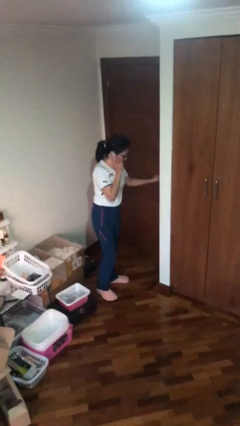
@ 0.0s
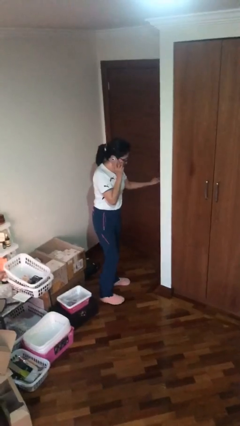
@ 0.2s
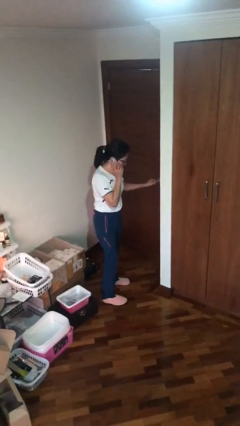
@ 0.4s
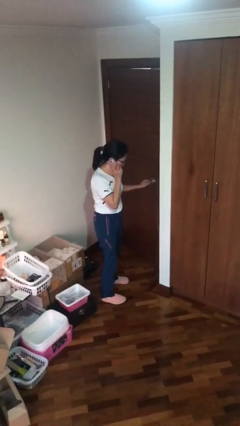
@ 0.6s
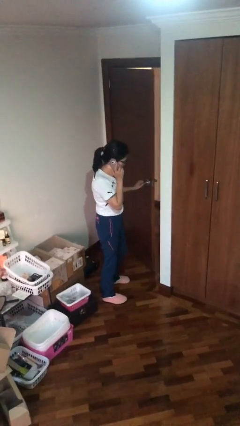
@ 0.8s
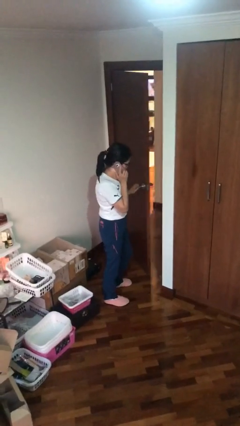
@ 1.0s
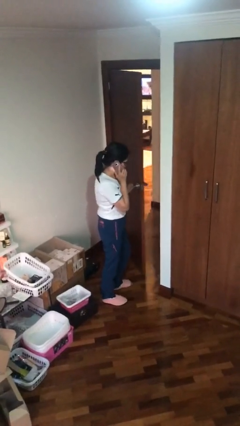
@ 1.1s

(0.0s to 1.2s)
person opens facility door

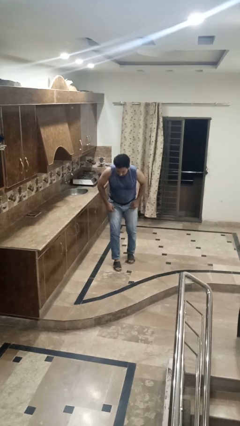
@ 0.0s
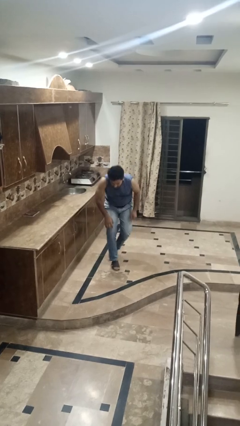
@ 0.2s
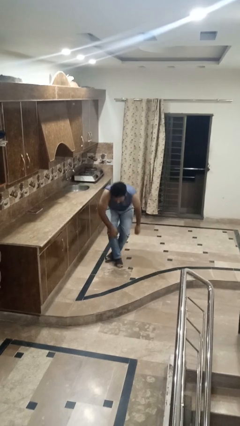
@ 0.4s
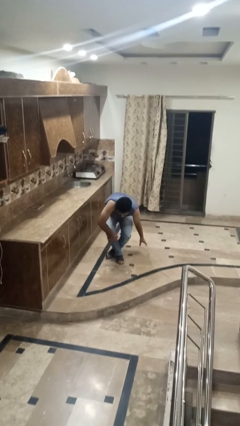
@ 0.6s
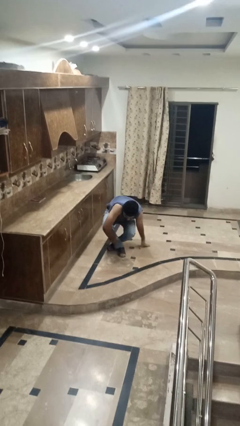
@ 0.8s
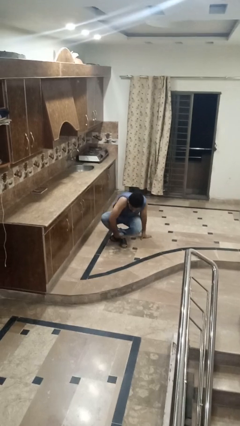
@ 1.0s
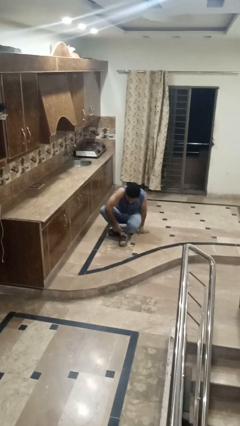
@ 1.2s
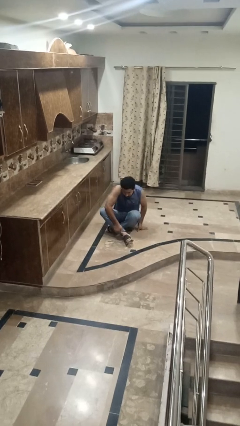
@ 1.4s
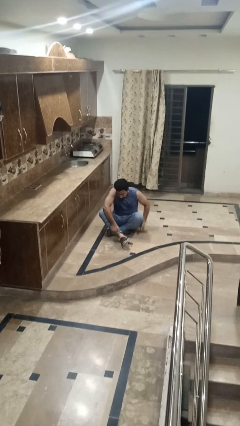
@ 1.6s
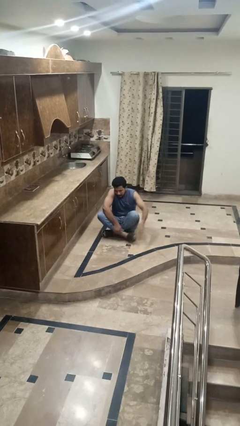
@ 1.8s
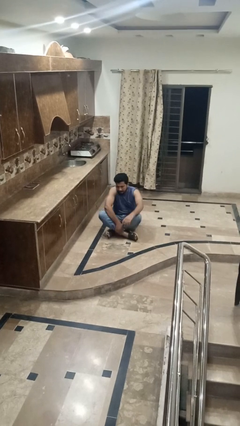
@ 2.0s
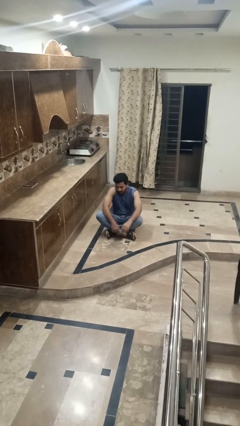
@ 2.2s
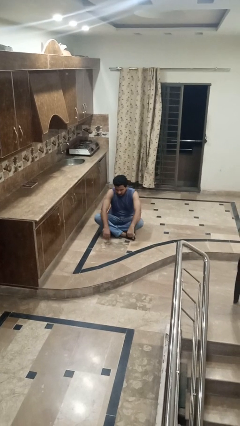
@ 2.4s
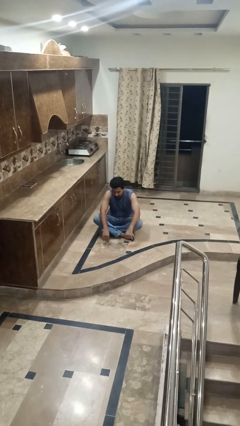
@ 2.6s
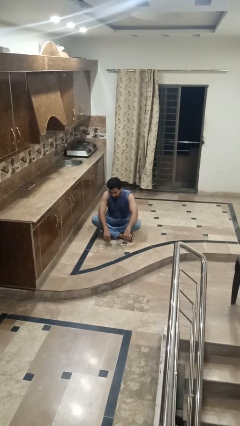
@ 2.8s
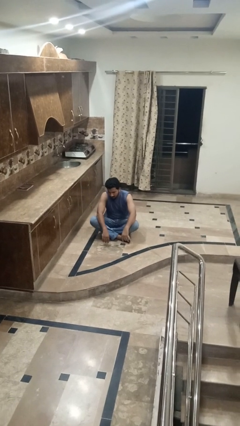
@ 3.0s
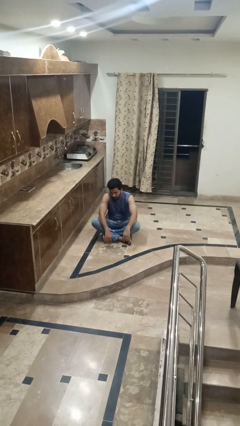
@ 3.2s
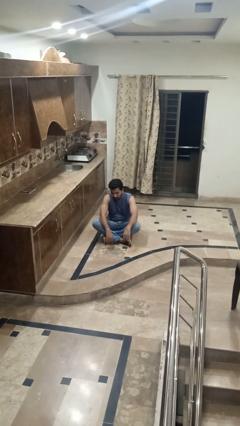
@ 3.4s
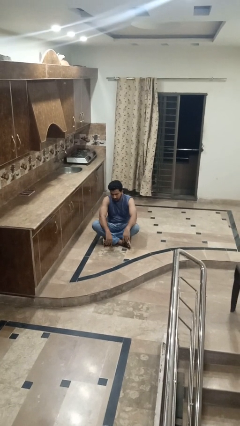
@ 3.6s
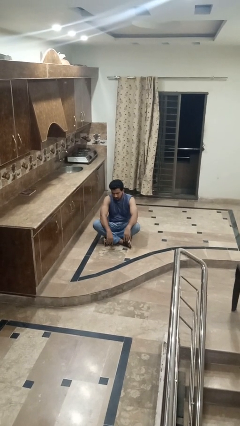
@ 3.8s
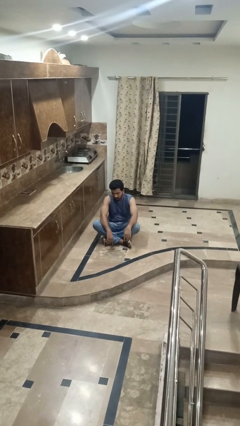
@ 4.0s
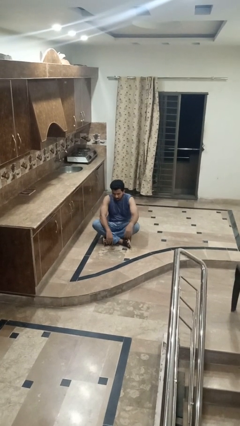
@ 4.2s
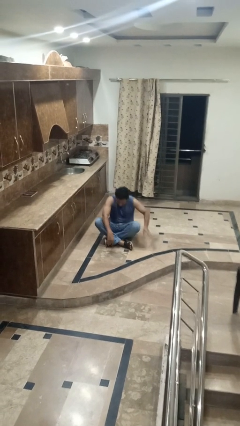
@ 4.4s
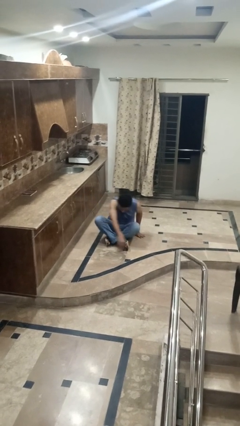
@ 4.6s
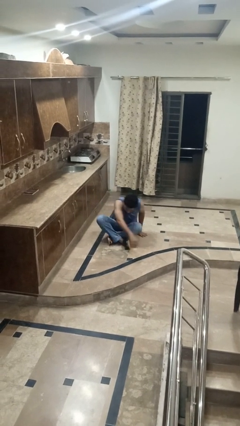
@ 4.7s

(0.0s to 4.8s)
person sits crisscross

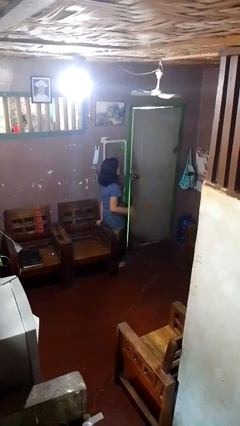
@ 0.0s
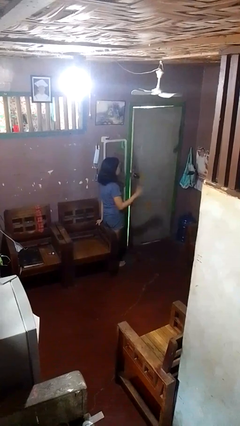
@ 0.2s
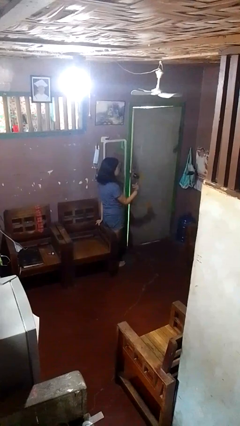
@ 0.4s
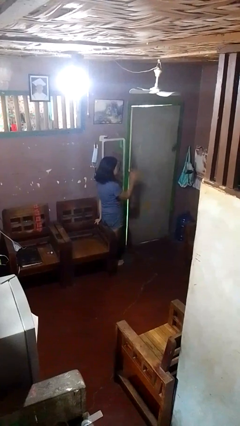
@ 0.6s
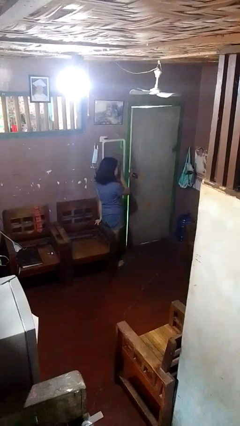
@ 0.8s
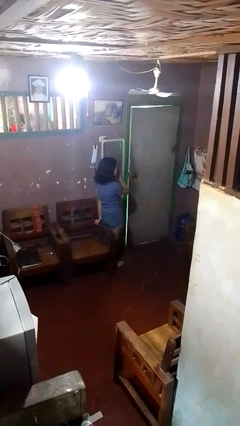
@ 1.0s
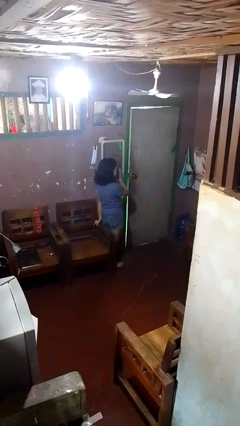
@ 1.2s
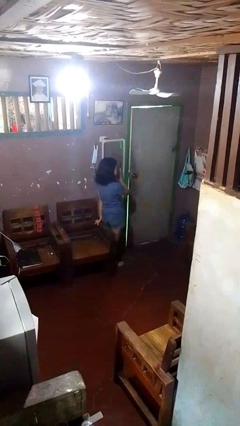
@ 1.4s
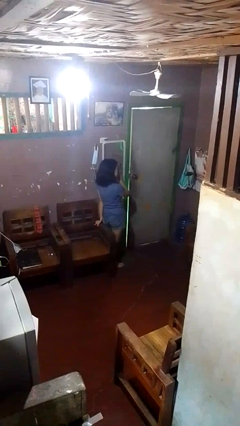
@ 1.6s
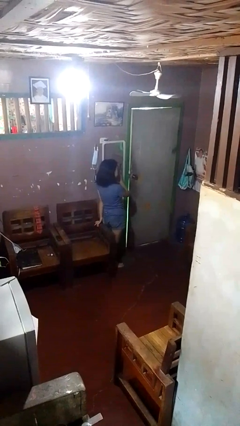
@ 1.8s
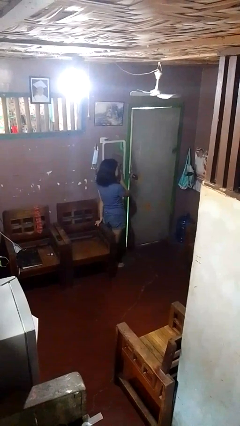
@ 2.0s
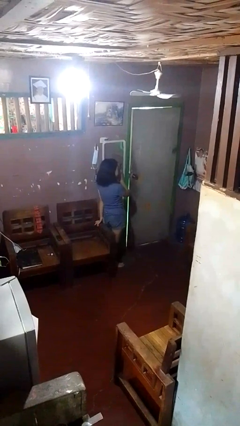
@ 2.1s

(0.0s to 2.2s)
person gestures swipe left

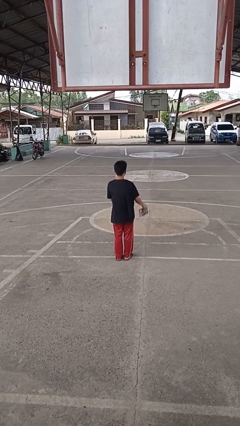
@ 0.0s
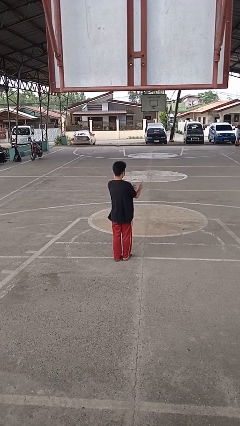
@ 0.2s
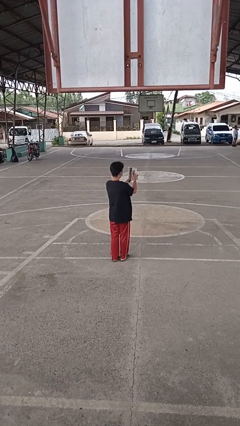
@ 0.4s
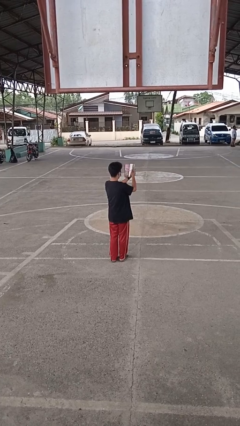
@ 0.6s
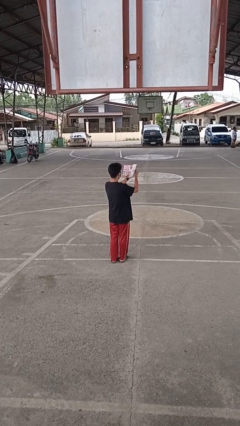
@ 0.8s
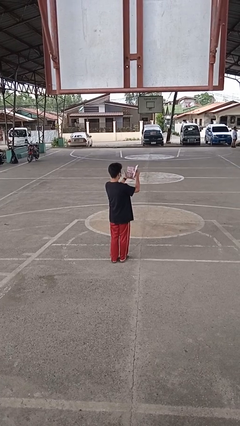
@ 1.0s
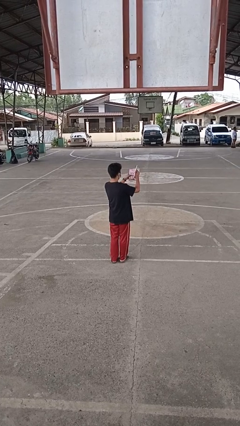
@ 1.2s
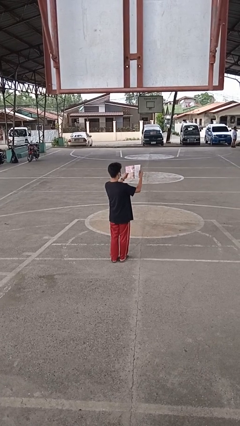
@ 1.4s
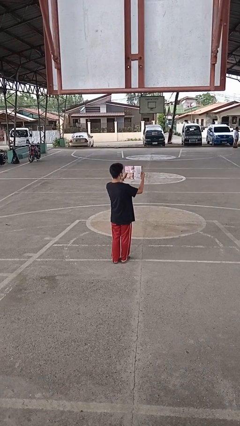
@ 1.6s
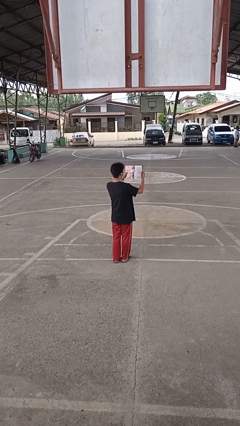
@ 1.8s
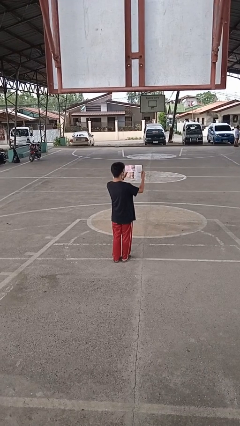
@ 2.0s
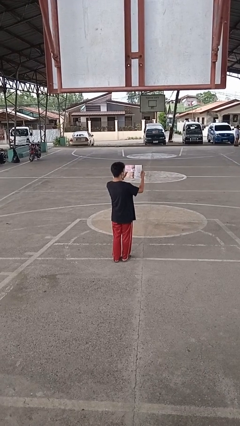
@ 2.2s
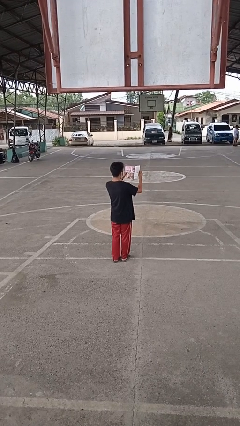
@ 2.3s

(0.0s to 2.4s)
person reads magazine

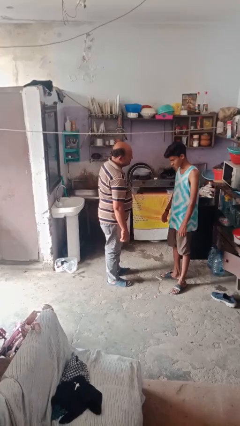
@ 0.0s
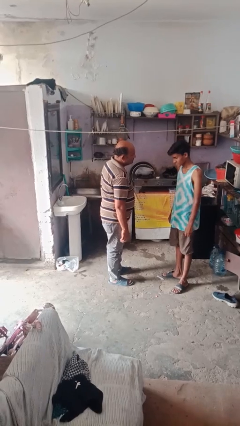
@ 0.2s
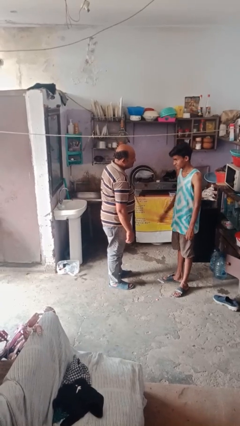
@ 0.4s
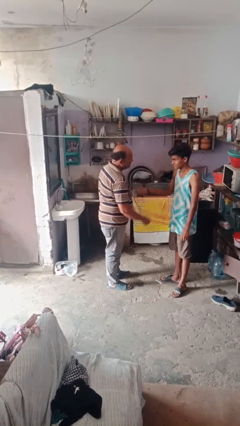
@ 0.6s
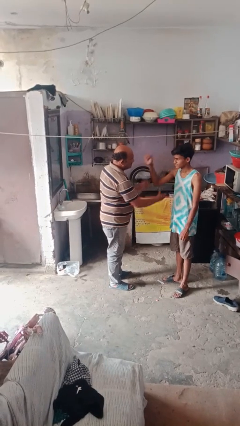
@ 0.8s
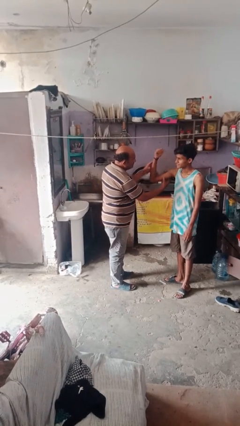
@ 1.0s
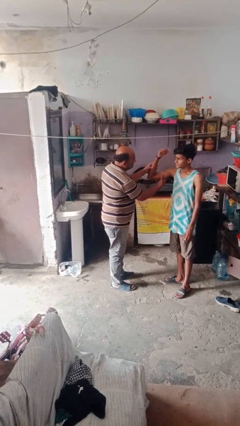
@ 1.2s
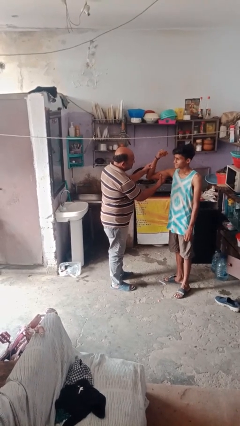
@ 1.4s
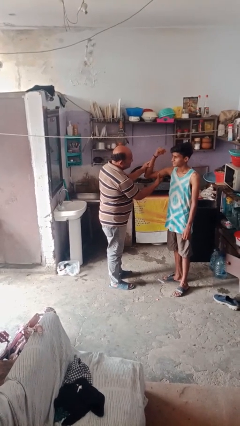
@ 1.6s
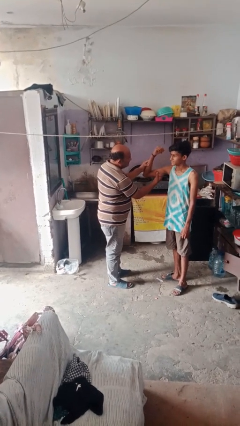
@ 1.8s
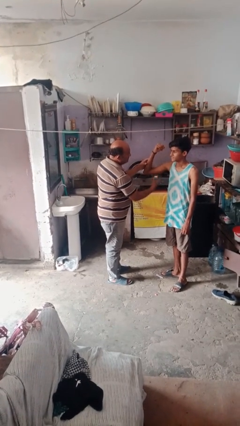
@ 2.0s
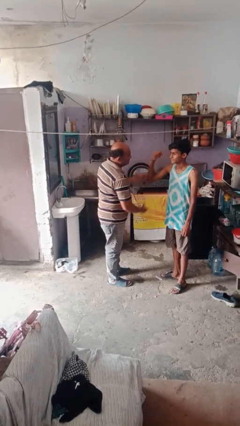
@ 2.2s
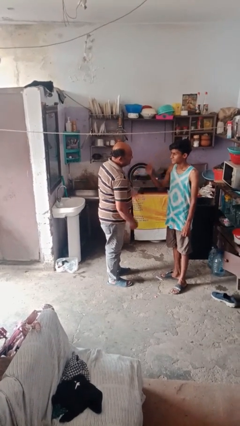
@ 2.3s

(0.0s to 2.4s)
person grabs person by bicep

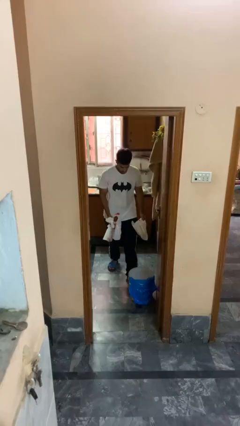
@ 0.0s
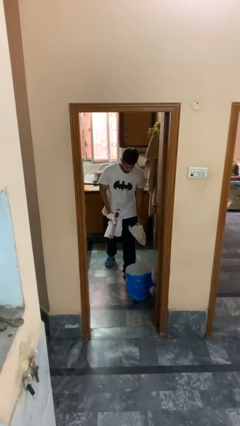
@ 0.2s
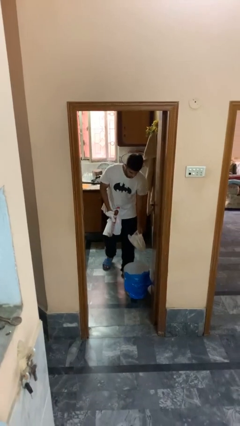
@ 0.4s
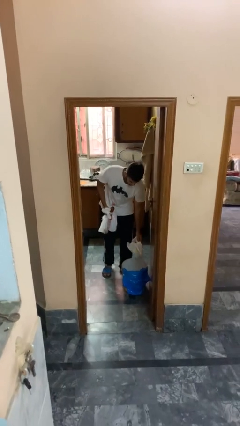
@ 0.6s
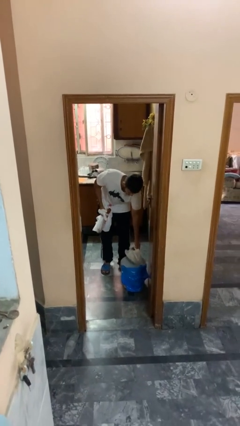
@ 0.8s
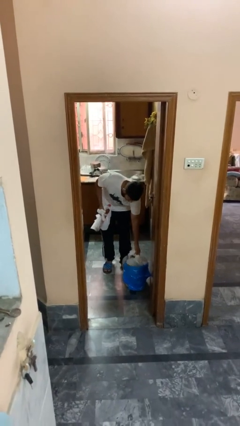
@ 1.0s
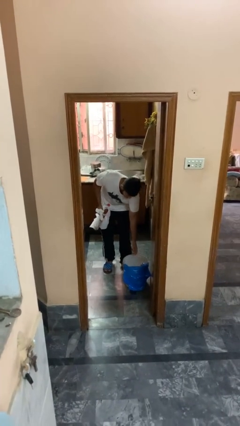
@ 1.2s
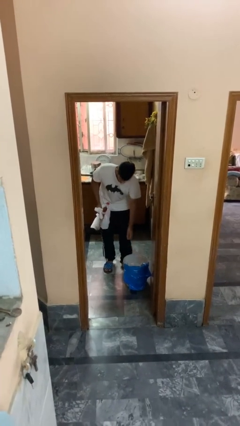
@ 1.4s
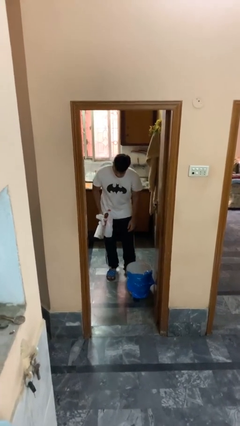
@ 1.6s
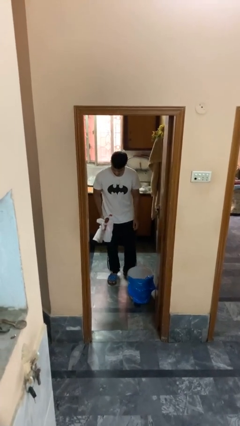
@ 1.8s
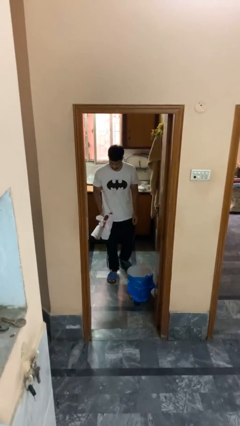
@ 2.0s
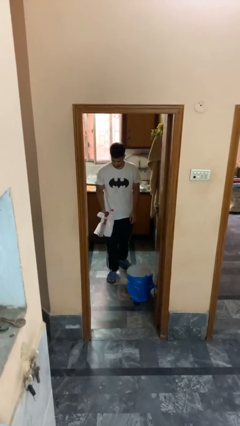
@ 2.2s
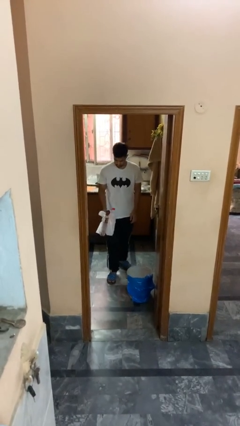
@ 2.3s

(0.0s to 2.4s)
person discards trash

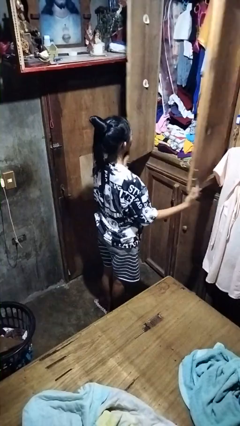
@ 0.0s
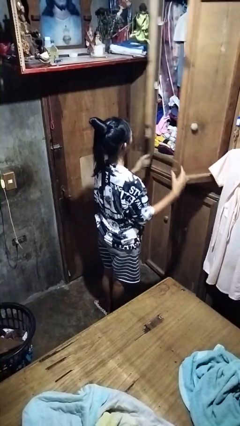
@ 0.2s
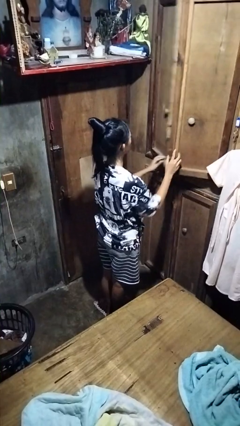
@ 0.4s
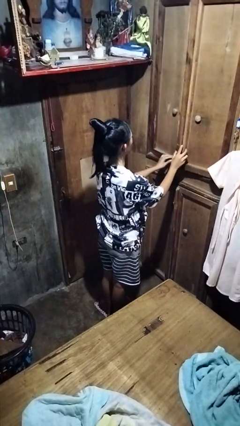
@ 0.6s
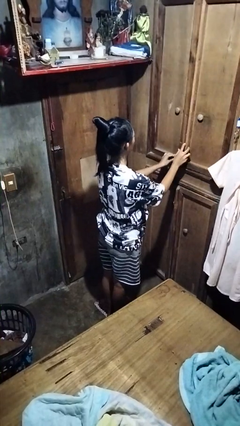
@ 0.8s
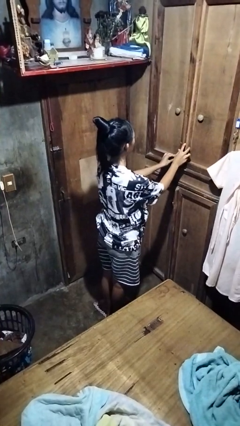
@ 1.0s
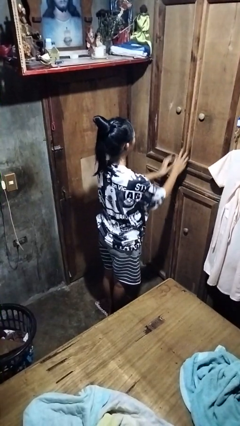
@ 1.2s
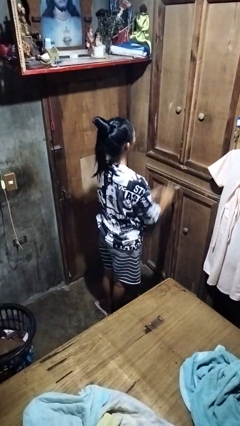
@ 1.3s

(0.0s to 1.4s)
person closes closet door

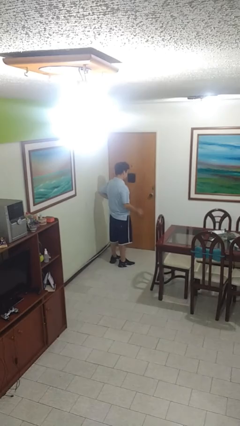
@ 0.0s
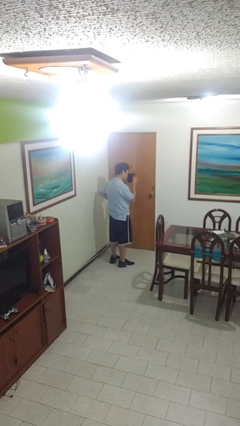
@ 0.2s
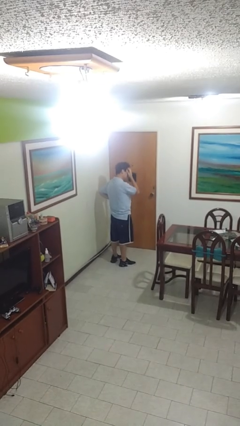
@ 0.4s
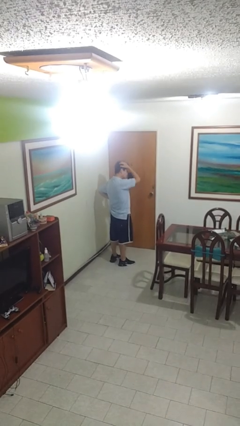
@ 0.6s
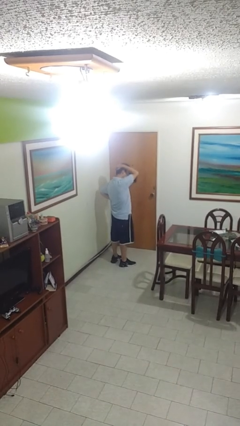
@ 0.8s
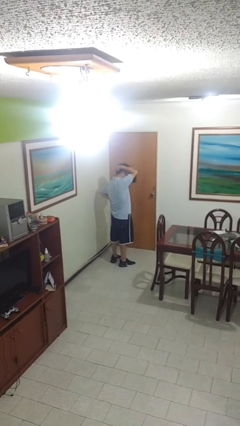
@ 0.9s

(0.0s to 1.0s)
person strokes hair
